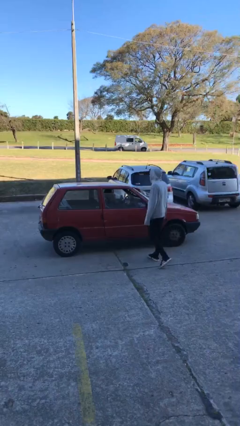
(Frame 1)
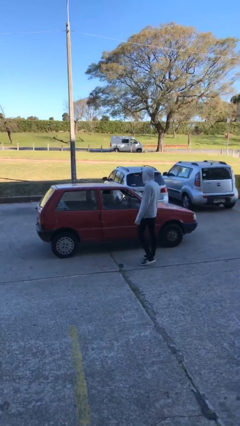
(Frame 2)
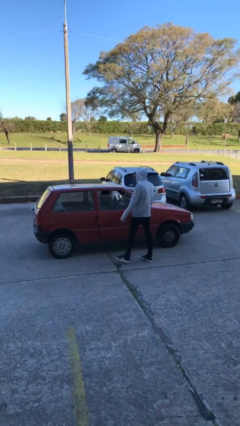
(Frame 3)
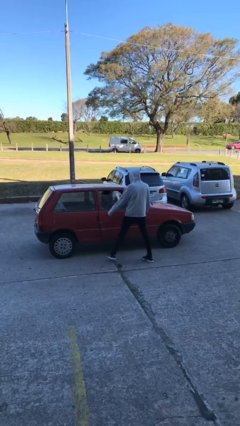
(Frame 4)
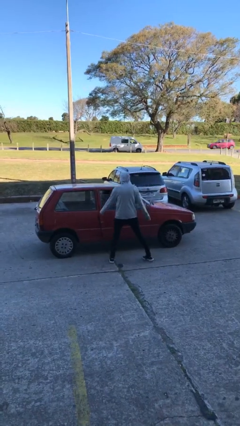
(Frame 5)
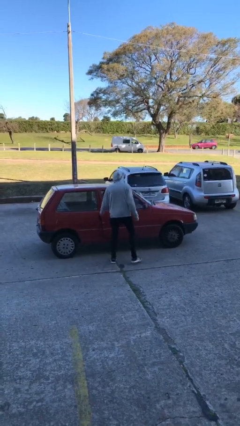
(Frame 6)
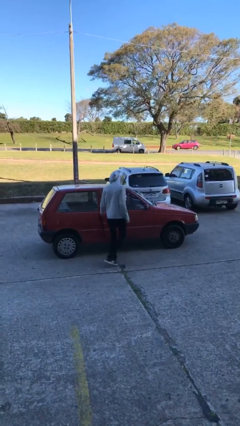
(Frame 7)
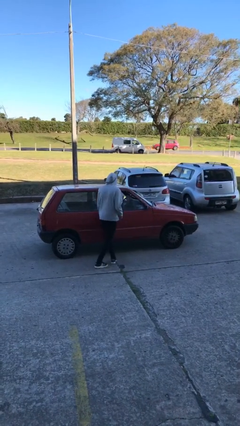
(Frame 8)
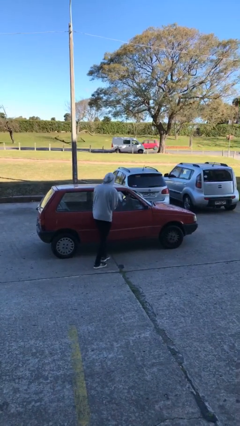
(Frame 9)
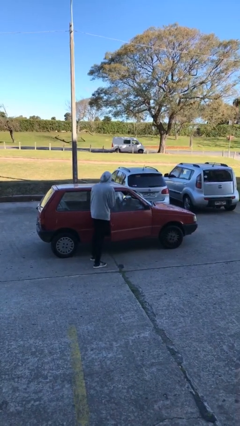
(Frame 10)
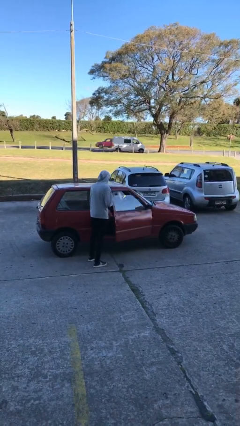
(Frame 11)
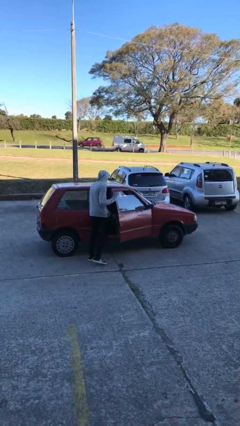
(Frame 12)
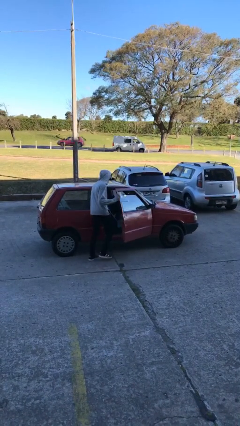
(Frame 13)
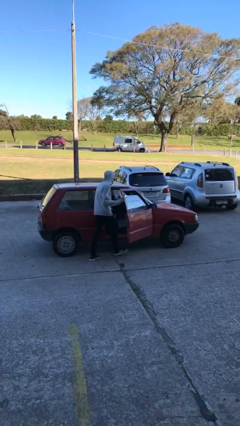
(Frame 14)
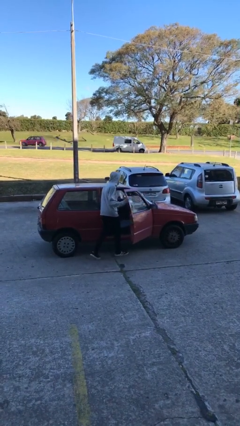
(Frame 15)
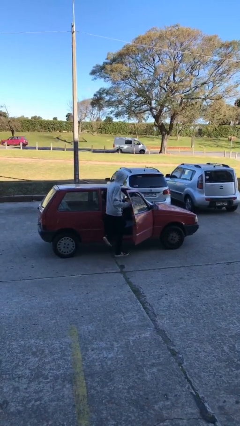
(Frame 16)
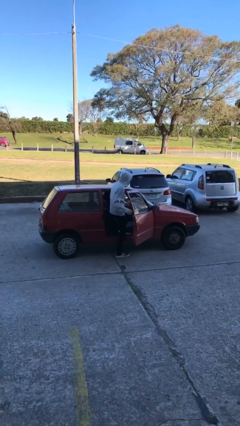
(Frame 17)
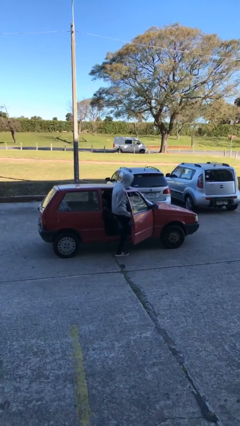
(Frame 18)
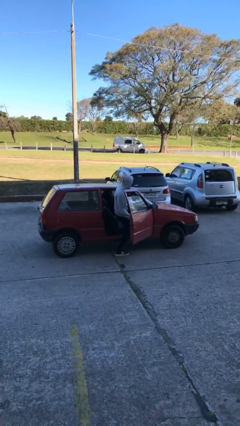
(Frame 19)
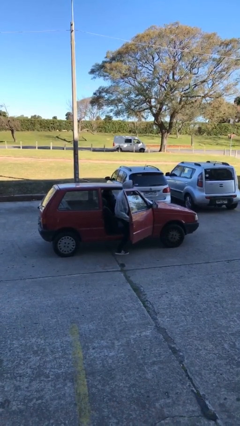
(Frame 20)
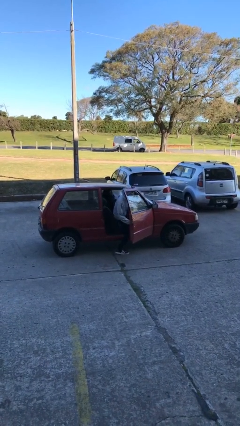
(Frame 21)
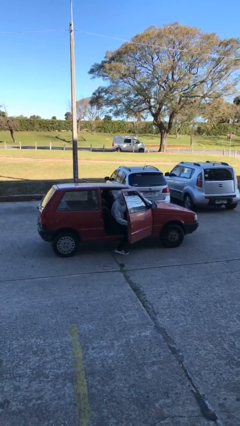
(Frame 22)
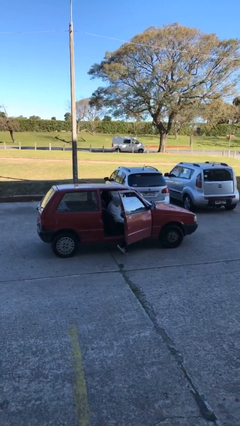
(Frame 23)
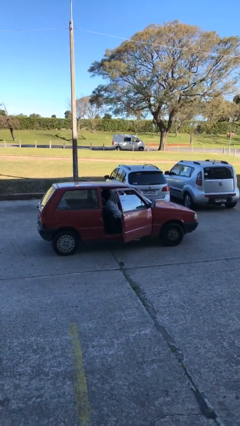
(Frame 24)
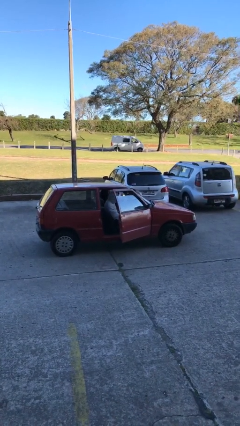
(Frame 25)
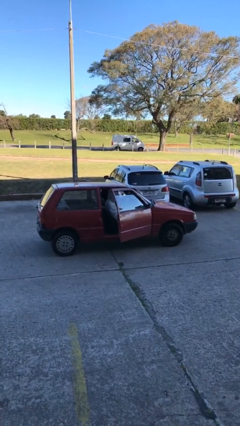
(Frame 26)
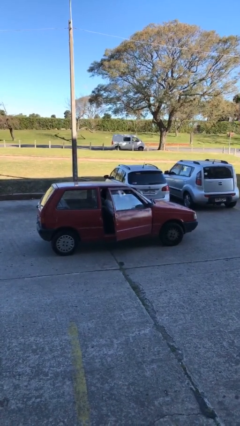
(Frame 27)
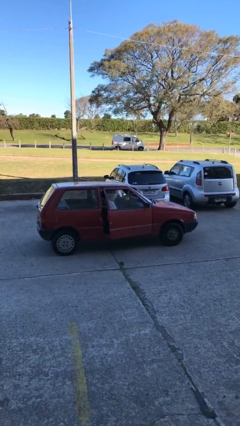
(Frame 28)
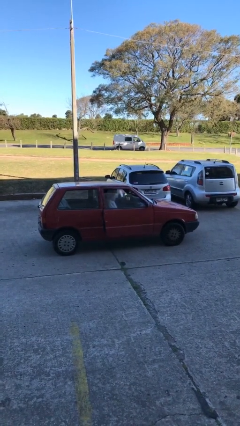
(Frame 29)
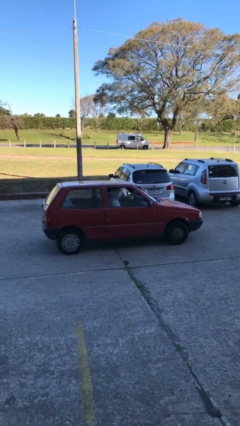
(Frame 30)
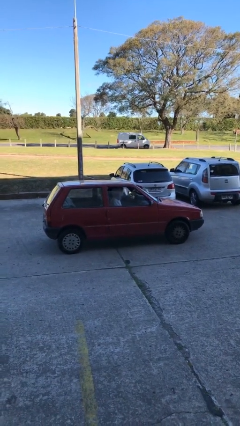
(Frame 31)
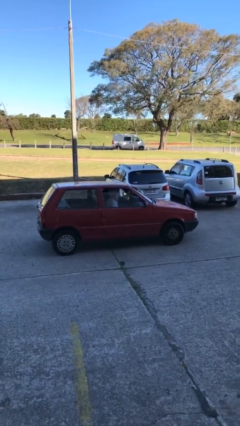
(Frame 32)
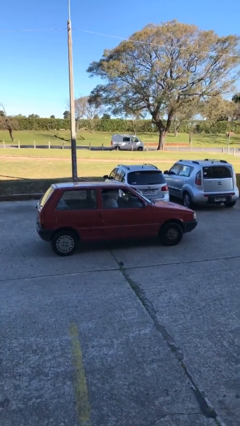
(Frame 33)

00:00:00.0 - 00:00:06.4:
car picks up person

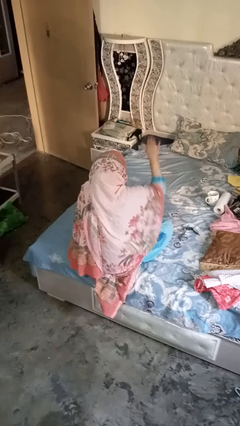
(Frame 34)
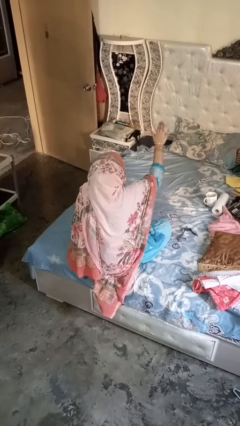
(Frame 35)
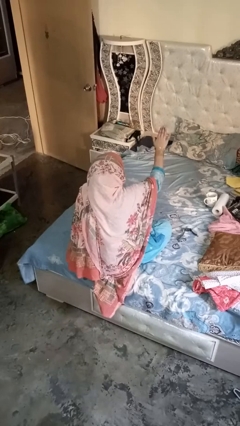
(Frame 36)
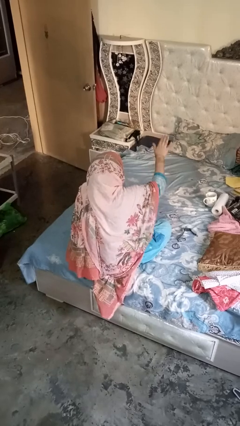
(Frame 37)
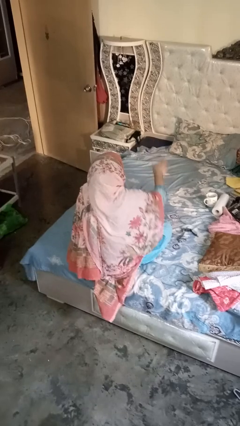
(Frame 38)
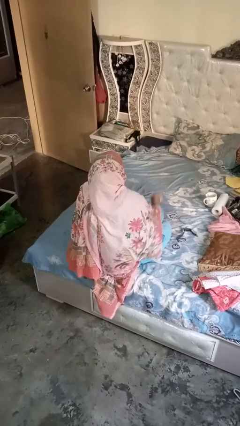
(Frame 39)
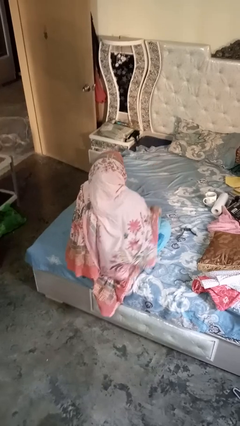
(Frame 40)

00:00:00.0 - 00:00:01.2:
person gestures stop

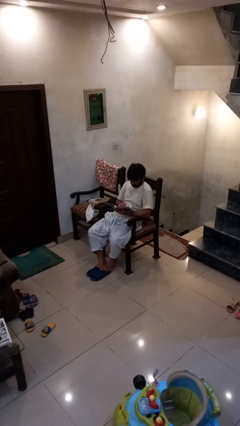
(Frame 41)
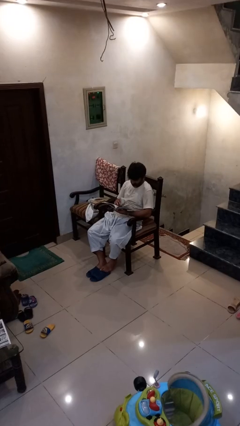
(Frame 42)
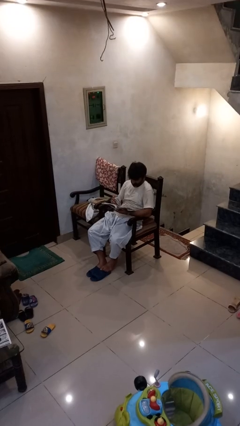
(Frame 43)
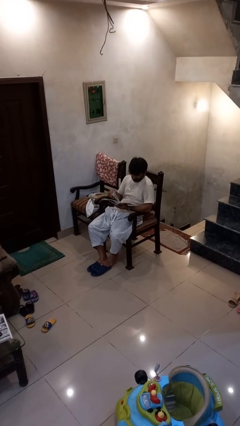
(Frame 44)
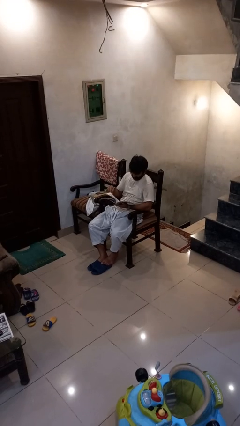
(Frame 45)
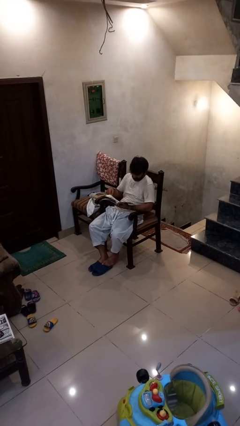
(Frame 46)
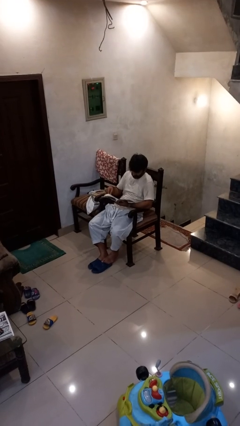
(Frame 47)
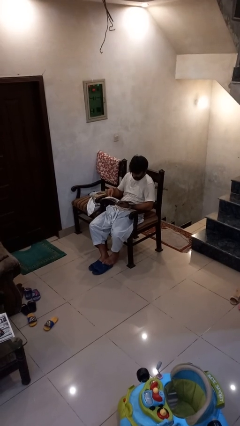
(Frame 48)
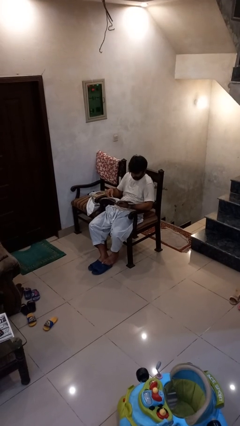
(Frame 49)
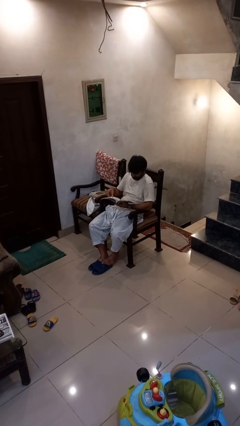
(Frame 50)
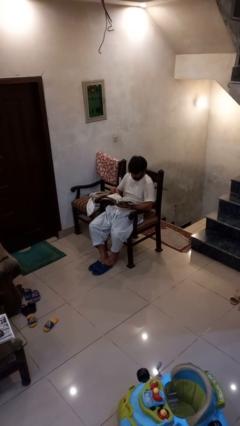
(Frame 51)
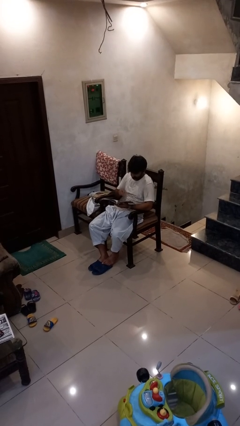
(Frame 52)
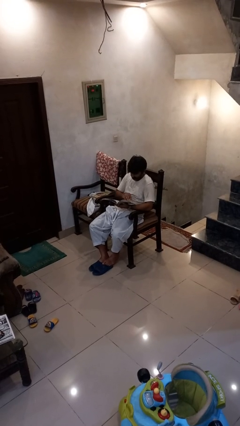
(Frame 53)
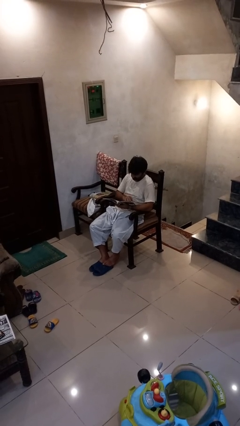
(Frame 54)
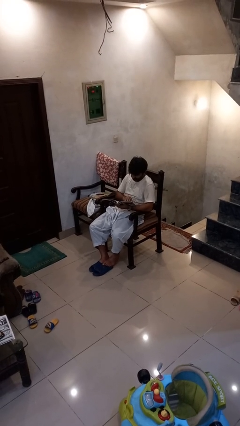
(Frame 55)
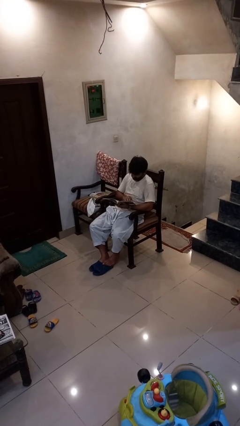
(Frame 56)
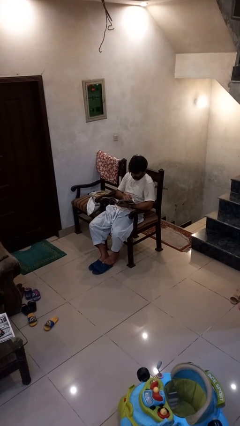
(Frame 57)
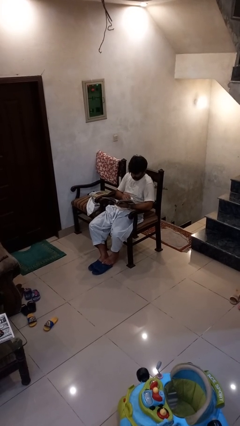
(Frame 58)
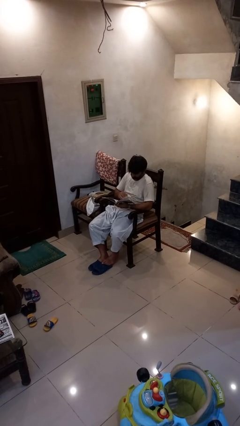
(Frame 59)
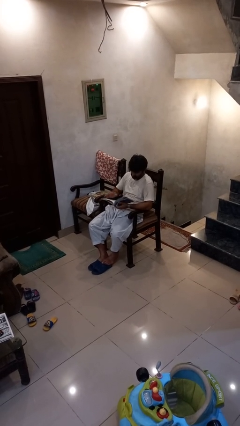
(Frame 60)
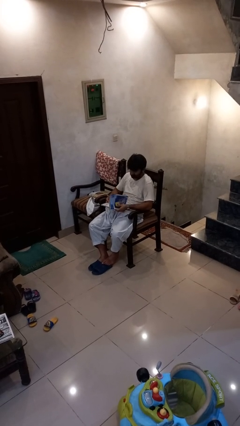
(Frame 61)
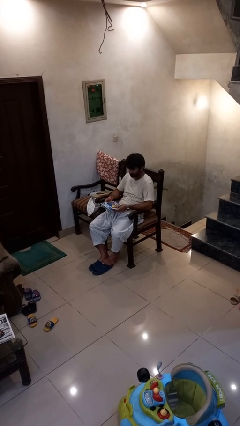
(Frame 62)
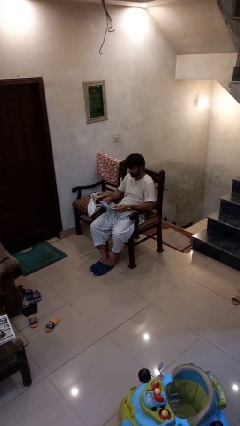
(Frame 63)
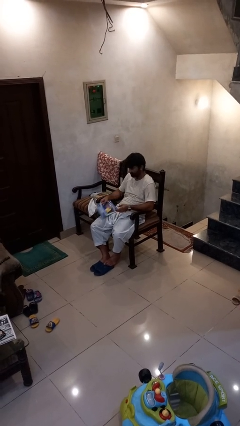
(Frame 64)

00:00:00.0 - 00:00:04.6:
person reads book

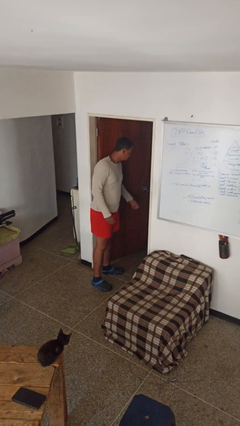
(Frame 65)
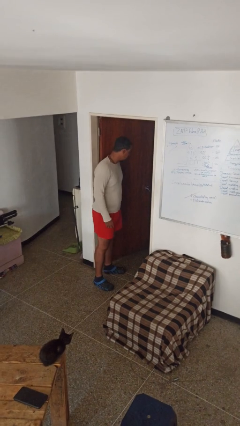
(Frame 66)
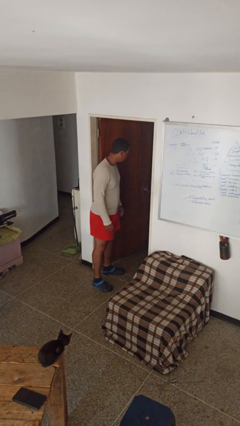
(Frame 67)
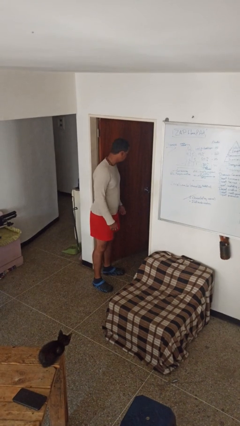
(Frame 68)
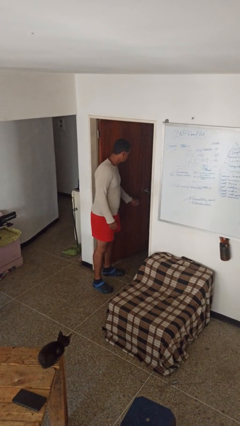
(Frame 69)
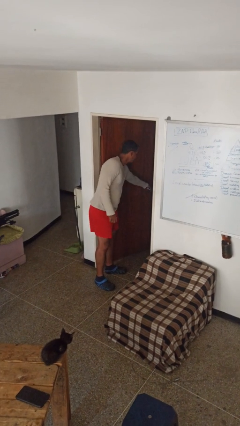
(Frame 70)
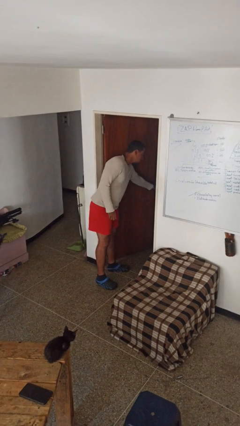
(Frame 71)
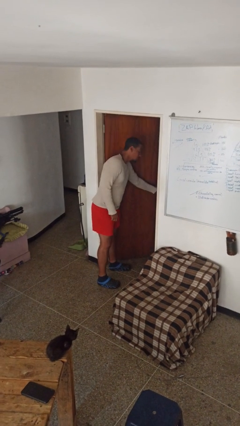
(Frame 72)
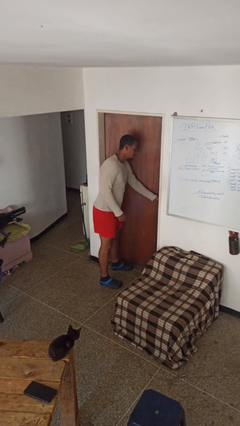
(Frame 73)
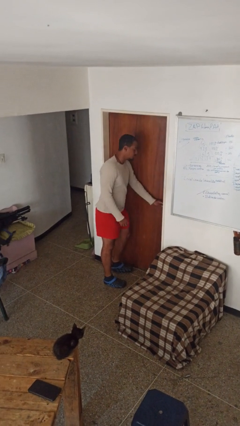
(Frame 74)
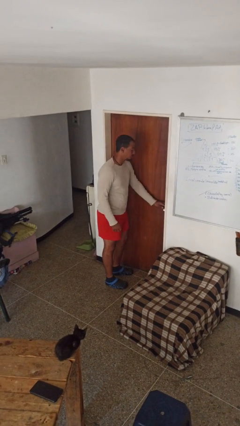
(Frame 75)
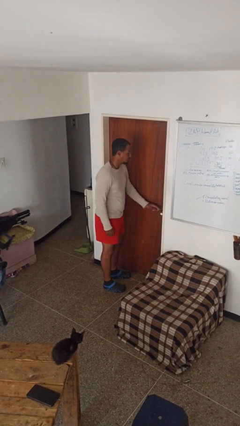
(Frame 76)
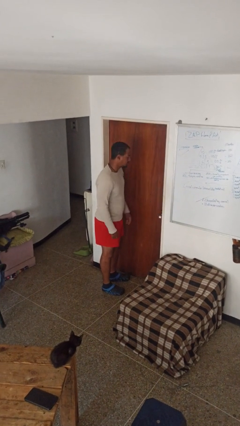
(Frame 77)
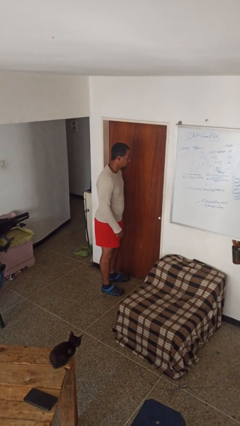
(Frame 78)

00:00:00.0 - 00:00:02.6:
person closes facility door

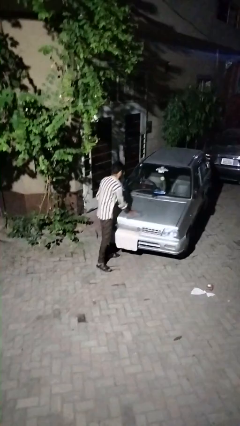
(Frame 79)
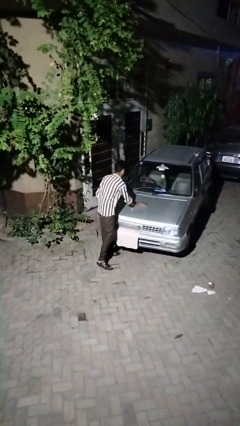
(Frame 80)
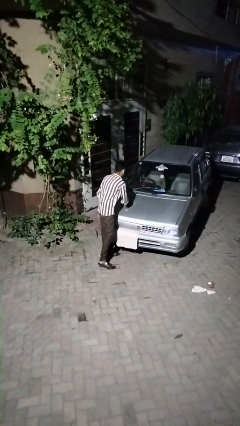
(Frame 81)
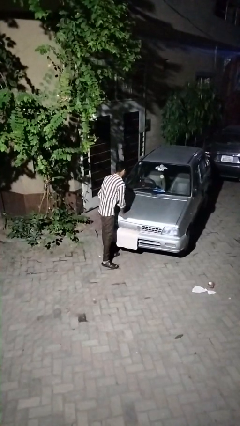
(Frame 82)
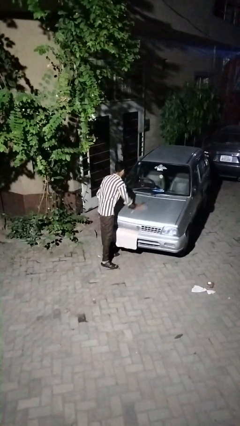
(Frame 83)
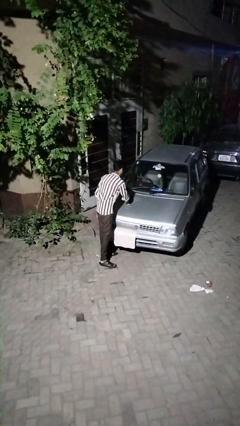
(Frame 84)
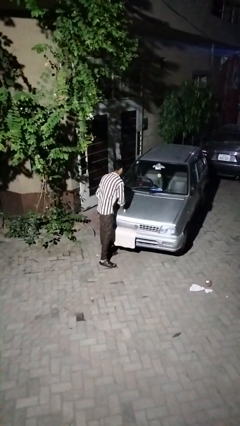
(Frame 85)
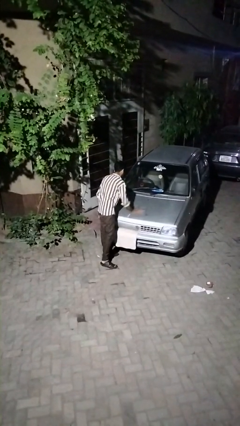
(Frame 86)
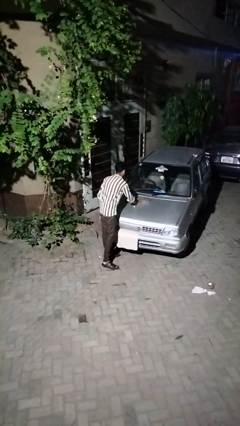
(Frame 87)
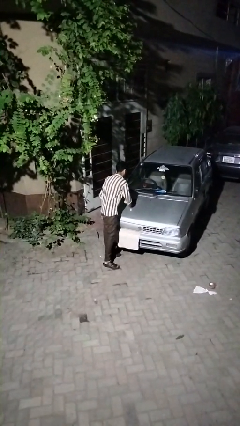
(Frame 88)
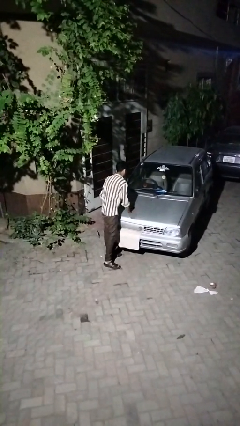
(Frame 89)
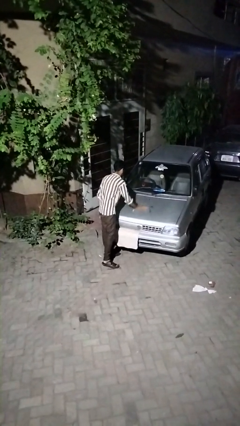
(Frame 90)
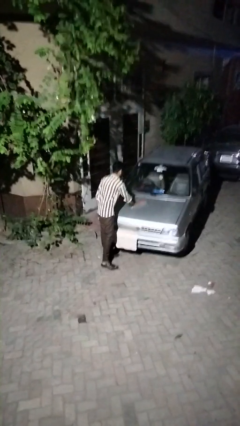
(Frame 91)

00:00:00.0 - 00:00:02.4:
person polishes car with rag

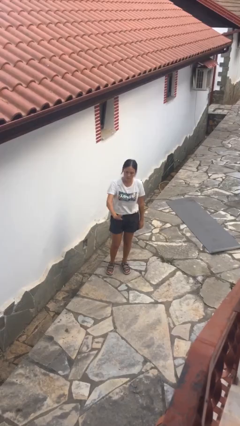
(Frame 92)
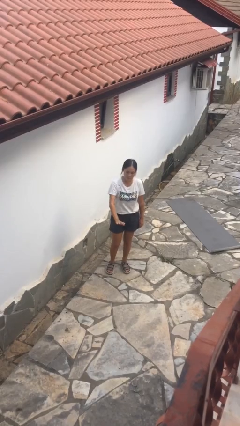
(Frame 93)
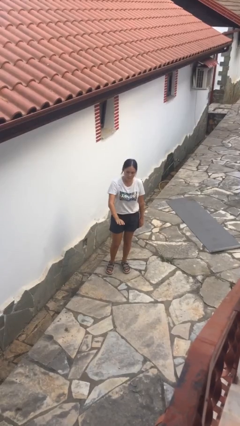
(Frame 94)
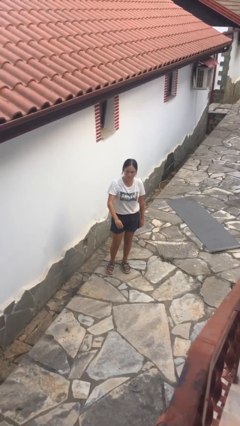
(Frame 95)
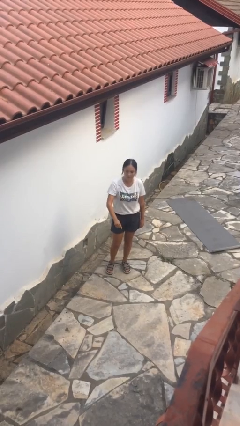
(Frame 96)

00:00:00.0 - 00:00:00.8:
person gestures swipe down
